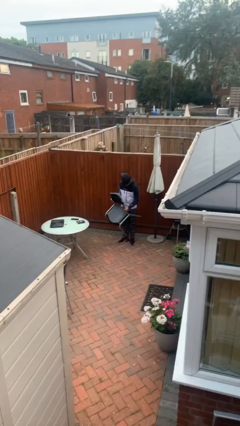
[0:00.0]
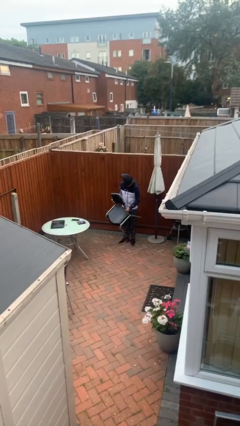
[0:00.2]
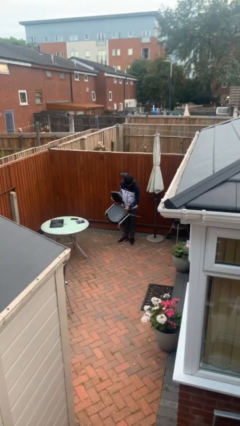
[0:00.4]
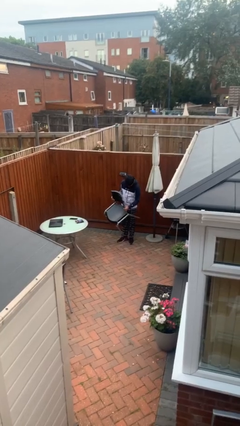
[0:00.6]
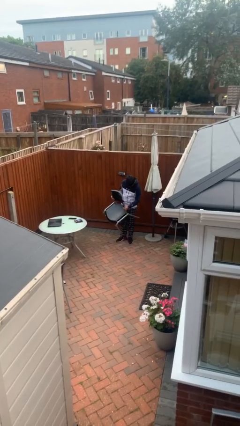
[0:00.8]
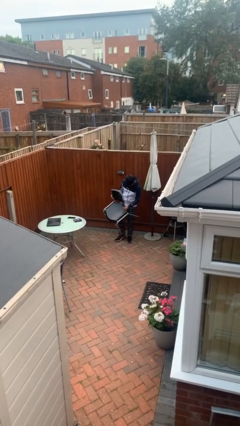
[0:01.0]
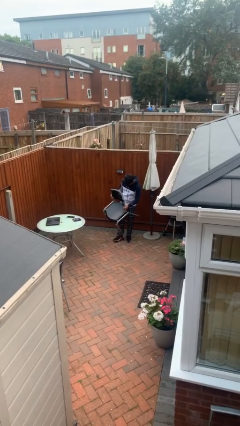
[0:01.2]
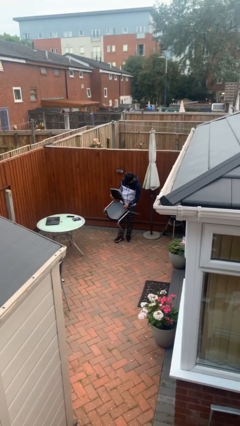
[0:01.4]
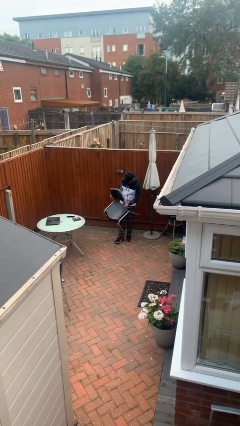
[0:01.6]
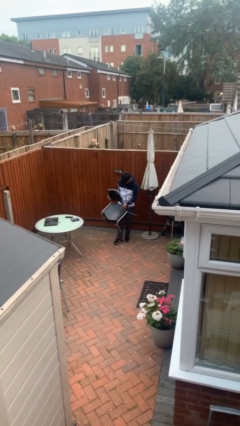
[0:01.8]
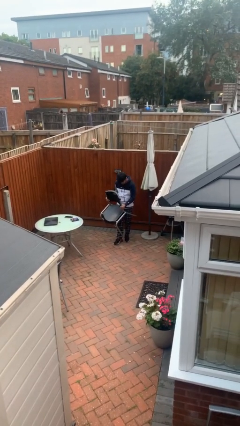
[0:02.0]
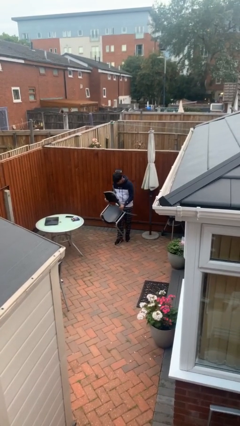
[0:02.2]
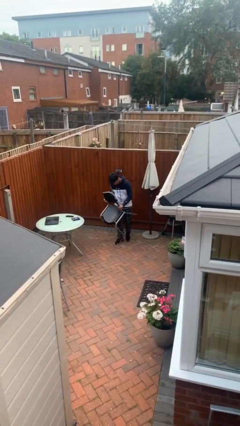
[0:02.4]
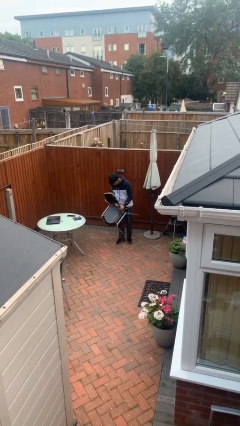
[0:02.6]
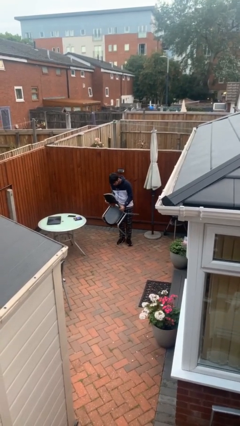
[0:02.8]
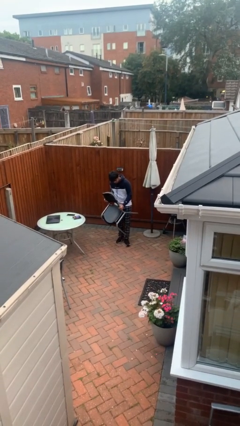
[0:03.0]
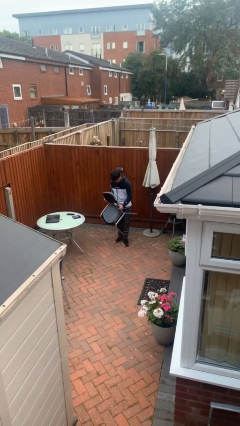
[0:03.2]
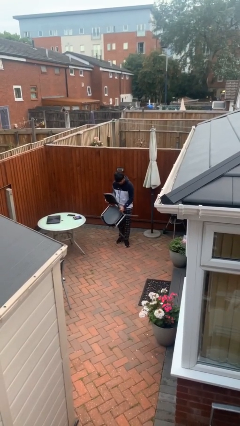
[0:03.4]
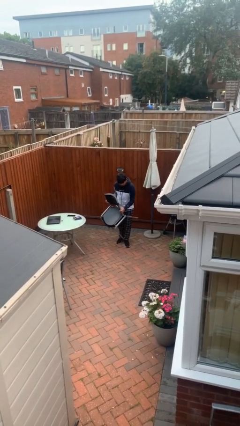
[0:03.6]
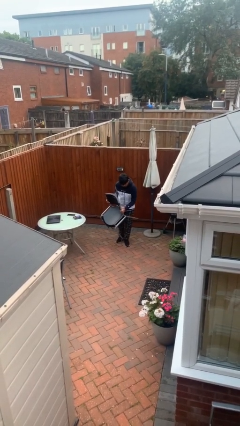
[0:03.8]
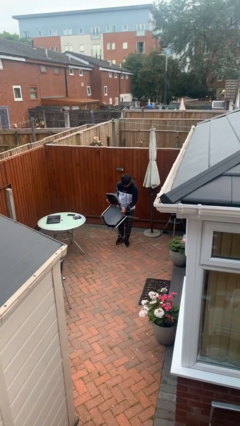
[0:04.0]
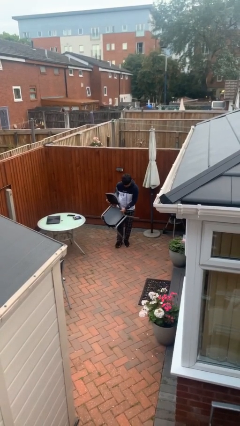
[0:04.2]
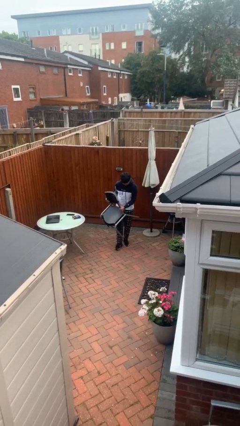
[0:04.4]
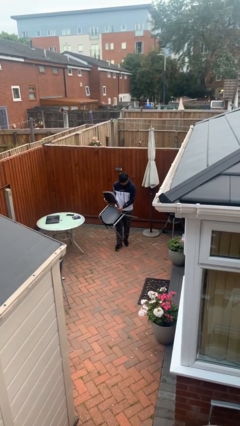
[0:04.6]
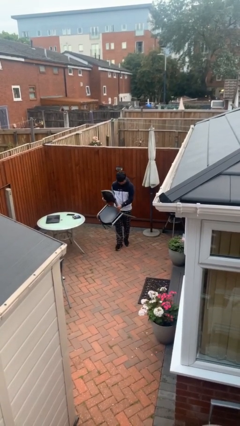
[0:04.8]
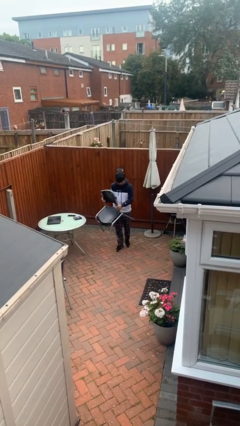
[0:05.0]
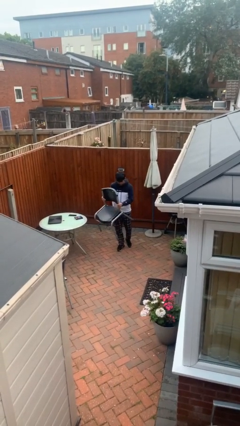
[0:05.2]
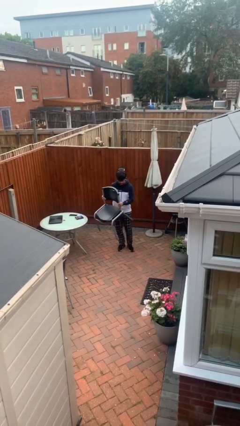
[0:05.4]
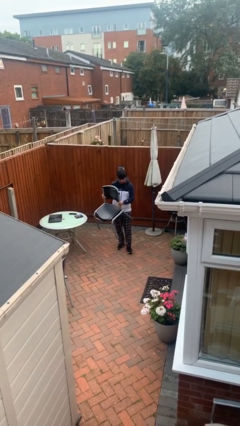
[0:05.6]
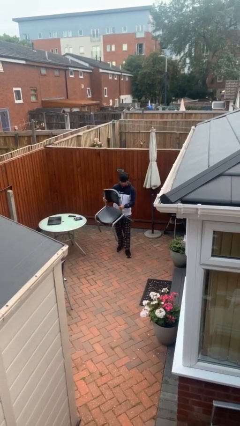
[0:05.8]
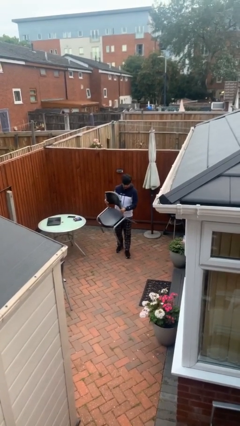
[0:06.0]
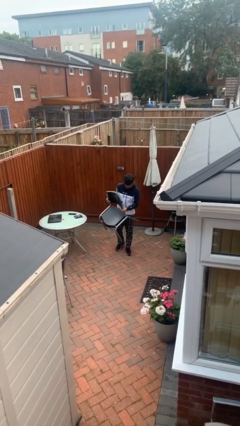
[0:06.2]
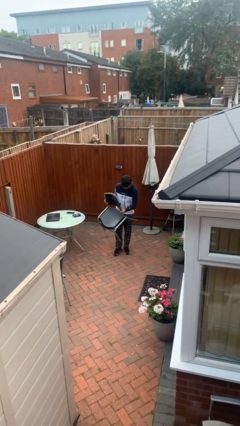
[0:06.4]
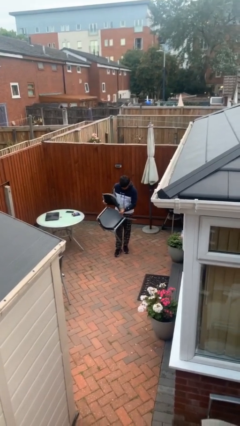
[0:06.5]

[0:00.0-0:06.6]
person carries heavy object

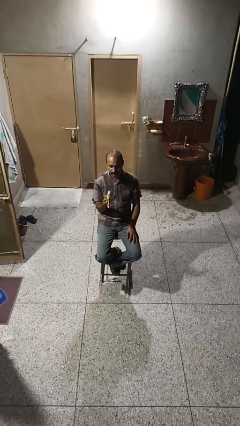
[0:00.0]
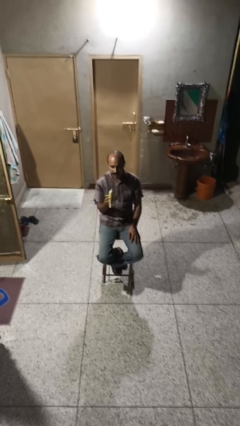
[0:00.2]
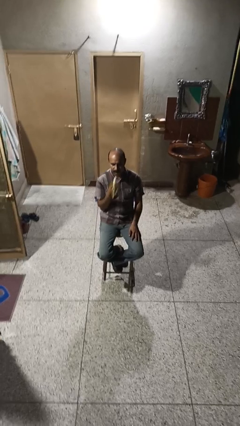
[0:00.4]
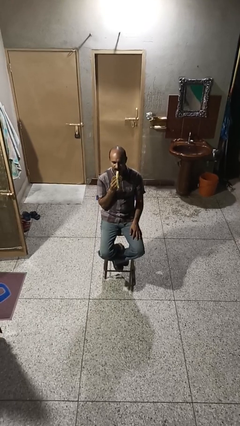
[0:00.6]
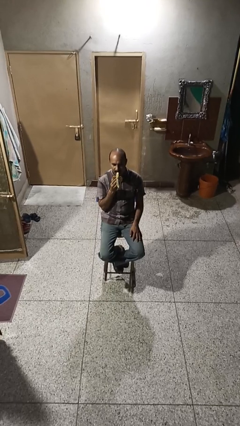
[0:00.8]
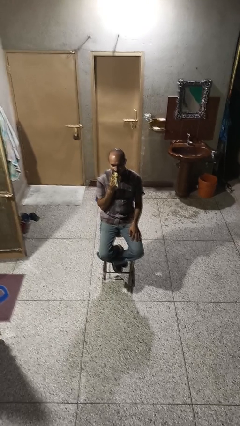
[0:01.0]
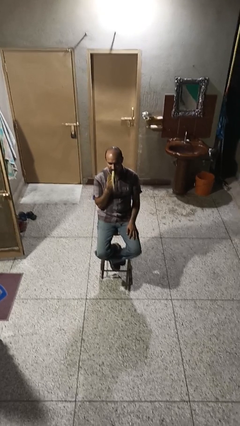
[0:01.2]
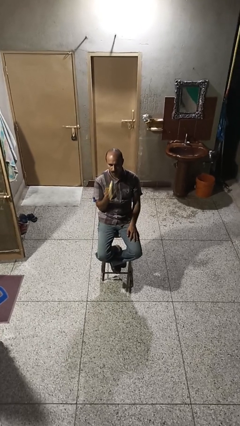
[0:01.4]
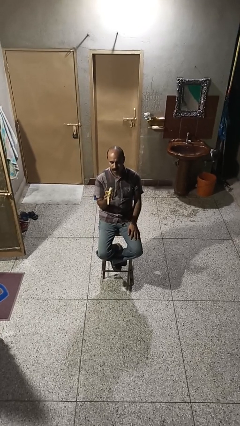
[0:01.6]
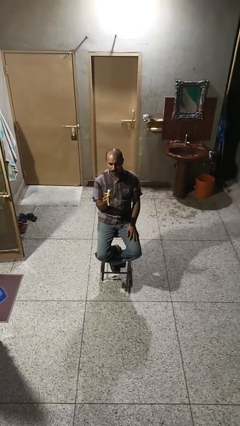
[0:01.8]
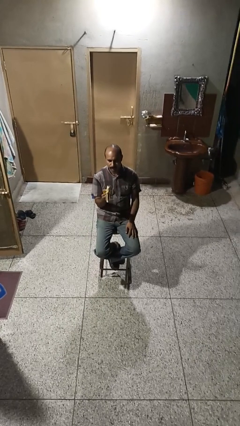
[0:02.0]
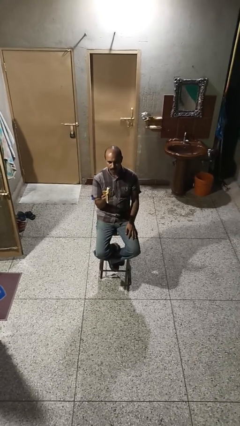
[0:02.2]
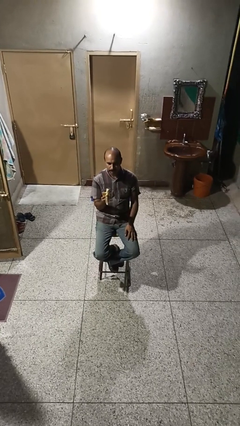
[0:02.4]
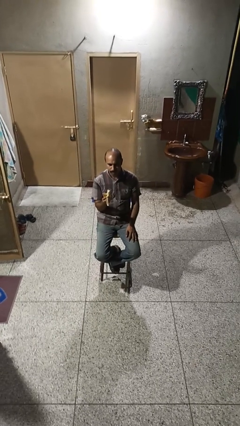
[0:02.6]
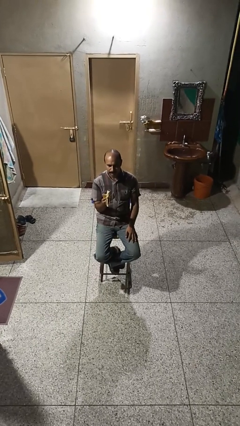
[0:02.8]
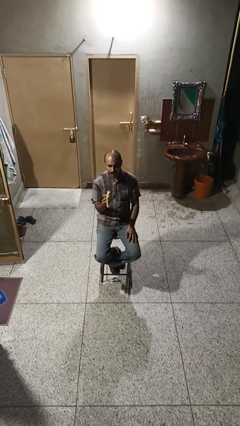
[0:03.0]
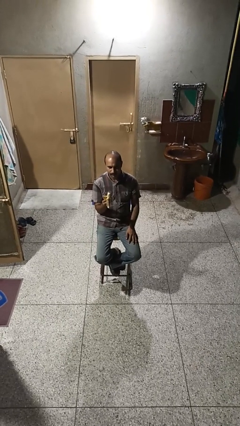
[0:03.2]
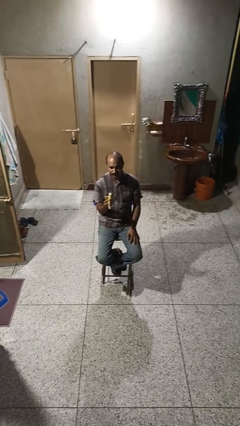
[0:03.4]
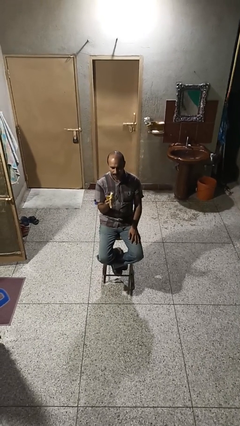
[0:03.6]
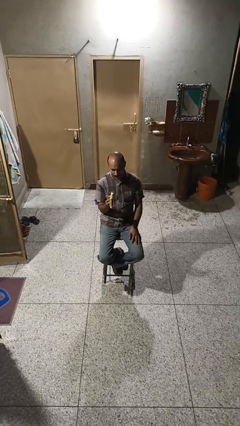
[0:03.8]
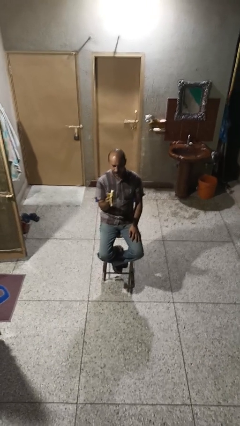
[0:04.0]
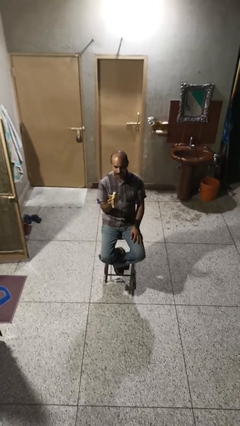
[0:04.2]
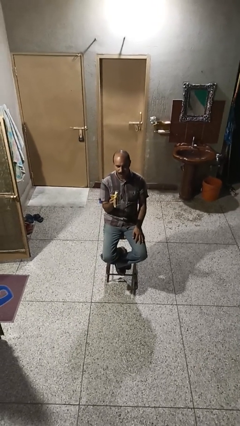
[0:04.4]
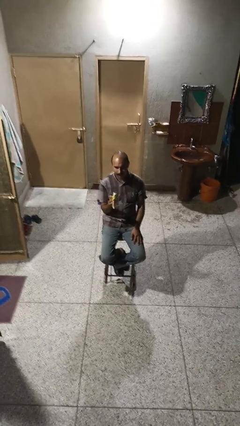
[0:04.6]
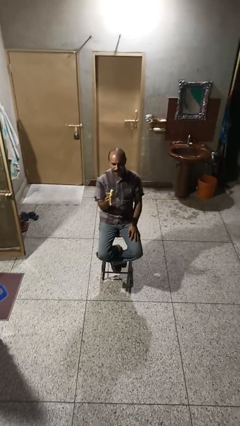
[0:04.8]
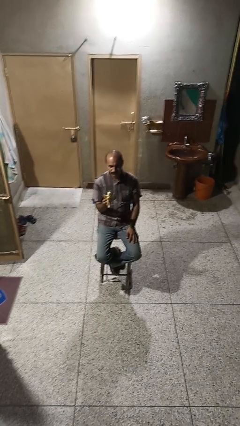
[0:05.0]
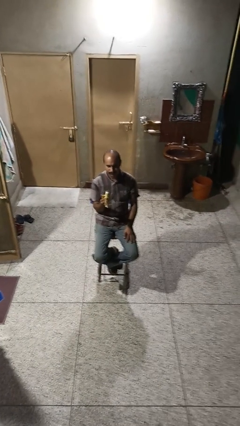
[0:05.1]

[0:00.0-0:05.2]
person eats banana

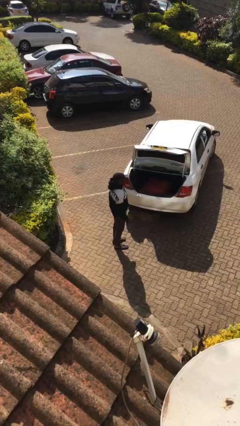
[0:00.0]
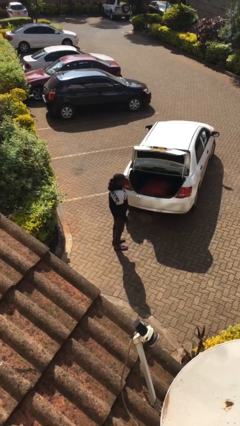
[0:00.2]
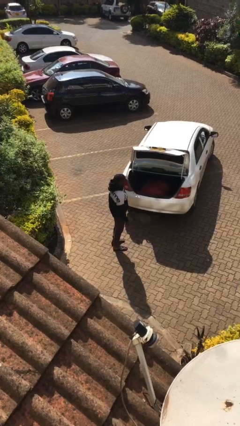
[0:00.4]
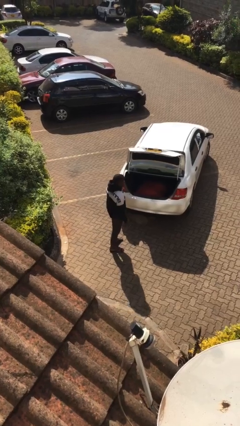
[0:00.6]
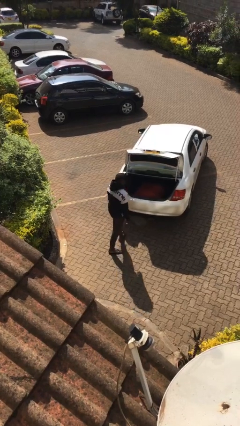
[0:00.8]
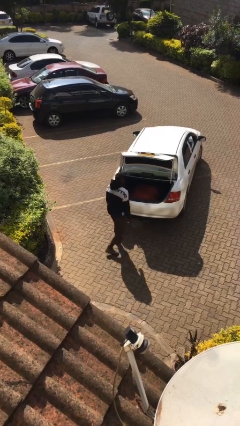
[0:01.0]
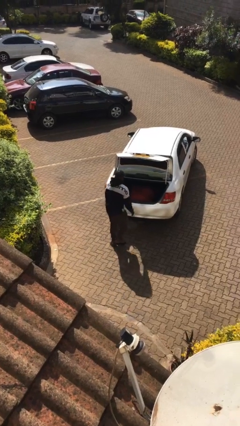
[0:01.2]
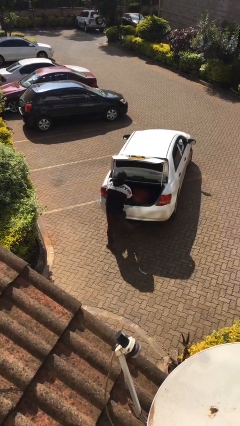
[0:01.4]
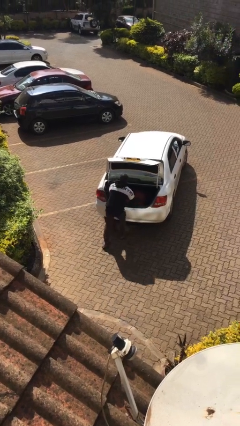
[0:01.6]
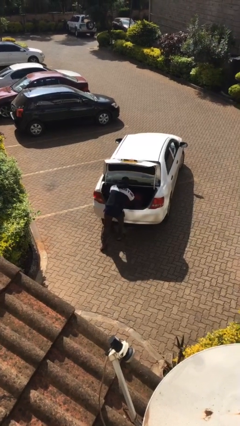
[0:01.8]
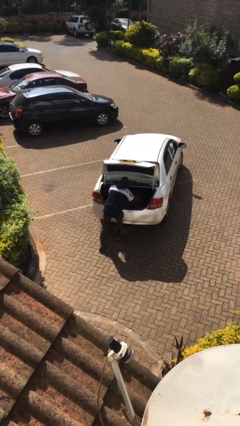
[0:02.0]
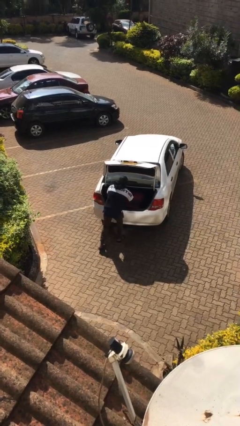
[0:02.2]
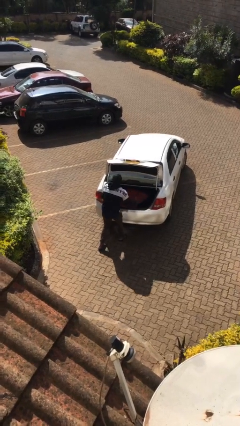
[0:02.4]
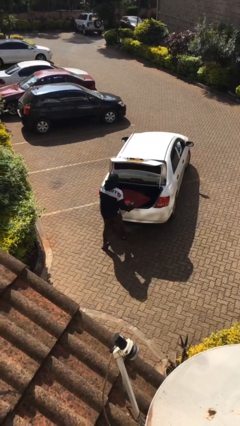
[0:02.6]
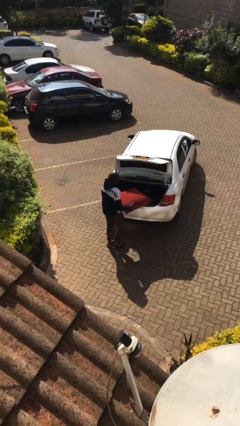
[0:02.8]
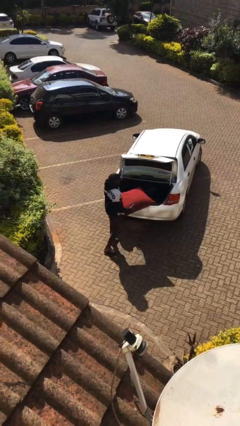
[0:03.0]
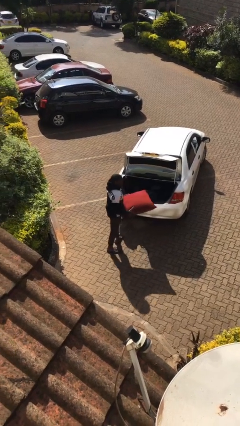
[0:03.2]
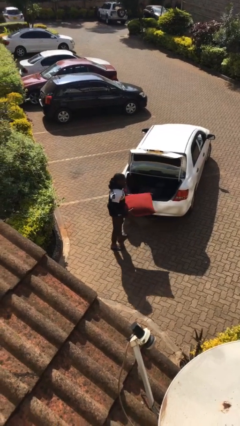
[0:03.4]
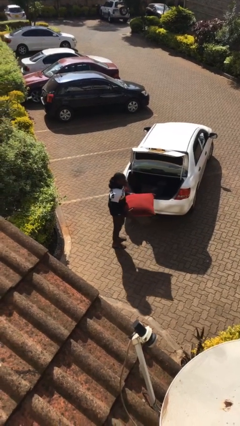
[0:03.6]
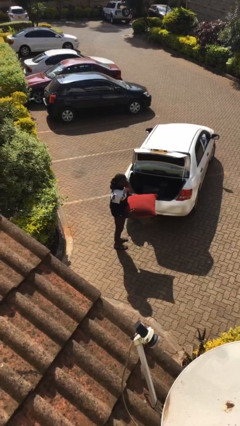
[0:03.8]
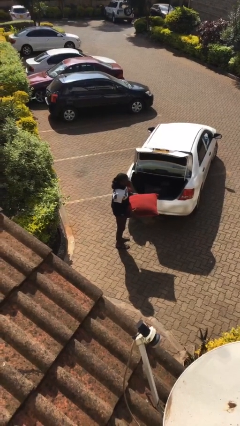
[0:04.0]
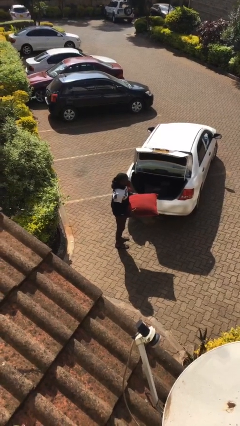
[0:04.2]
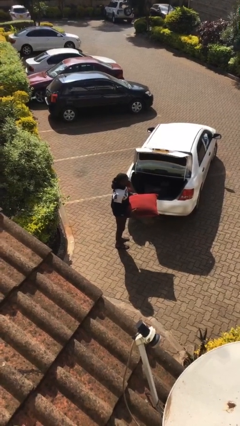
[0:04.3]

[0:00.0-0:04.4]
person unloads car

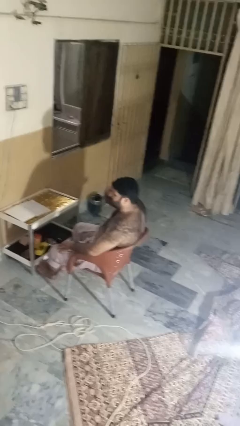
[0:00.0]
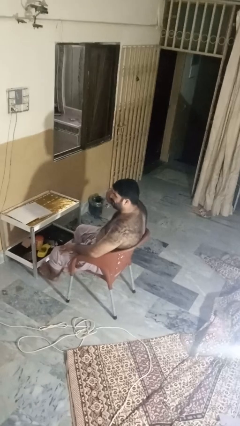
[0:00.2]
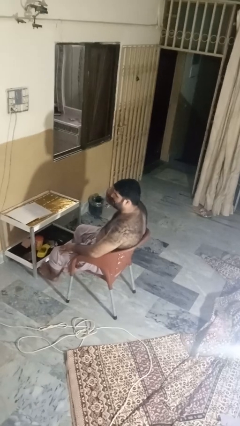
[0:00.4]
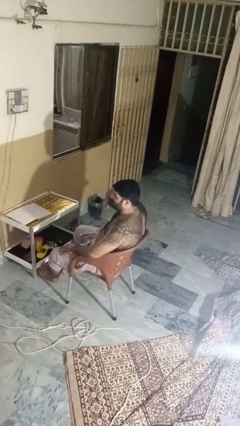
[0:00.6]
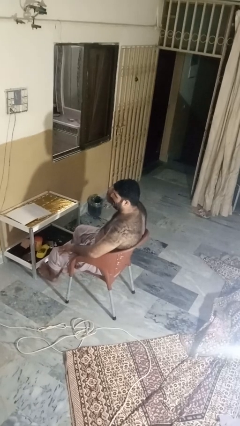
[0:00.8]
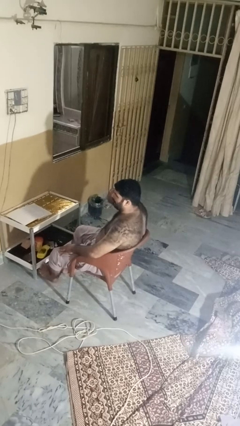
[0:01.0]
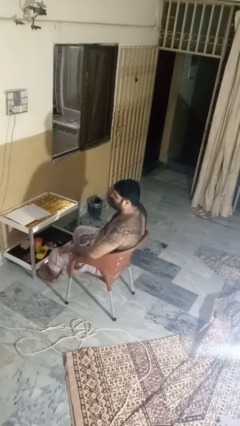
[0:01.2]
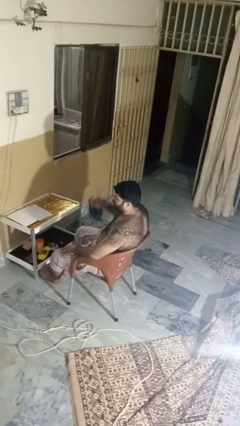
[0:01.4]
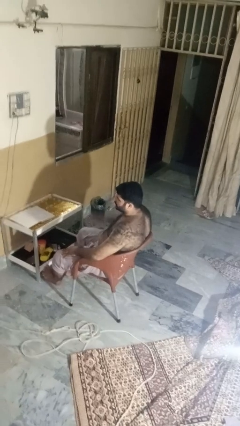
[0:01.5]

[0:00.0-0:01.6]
person rubs eyes
